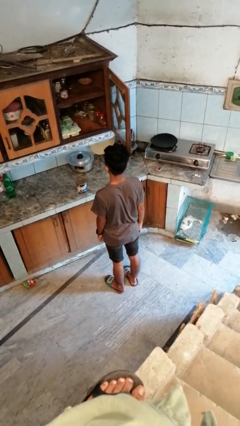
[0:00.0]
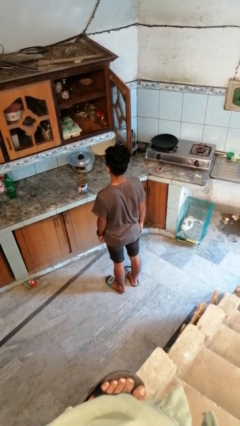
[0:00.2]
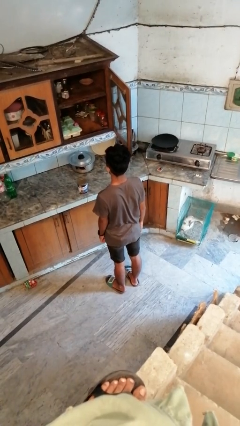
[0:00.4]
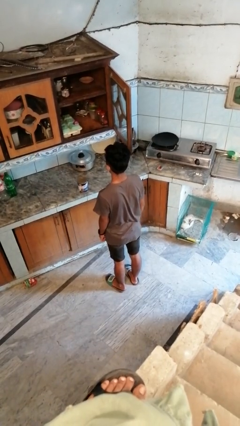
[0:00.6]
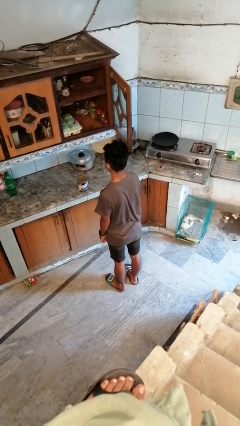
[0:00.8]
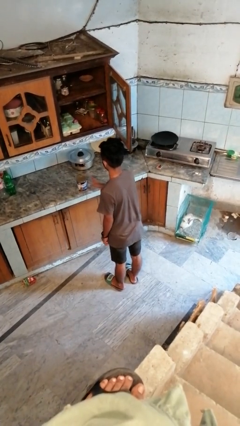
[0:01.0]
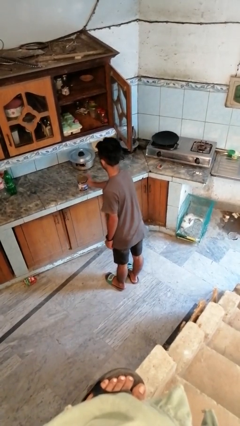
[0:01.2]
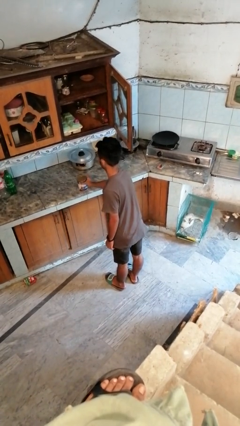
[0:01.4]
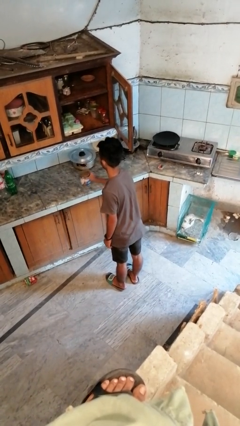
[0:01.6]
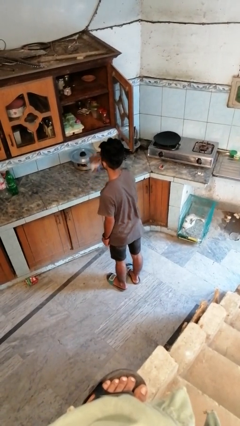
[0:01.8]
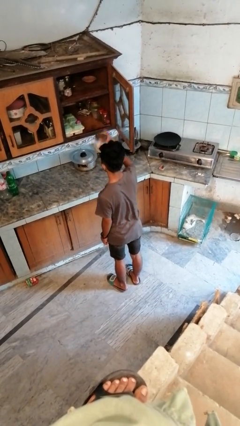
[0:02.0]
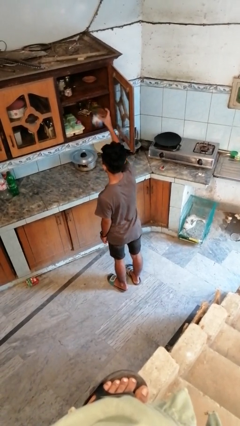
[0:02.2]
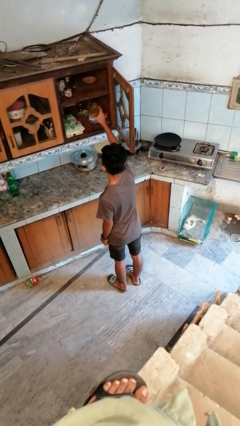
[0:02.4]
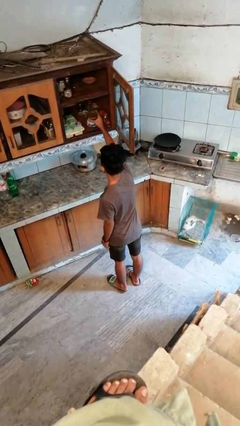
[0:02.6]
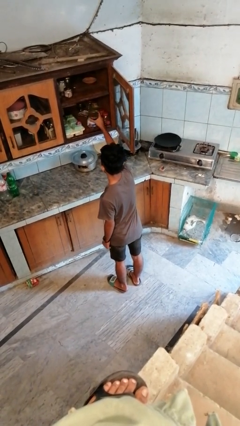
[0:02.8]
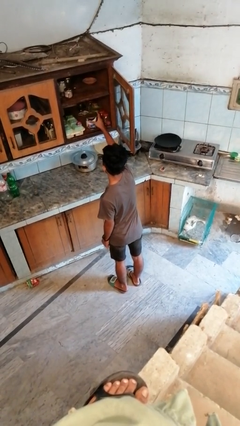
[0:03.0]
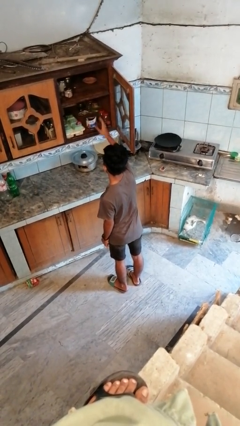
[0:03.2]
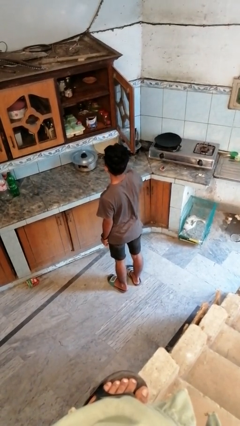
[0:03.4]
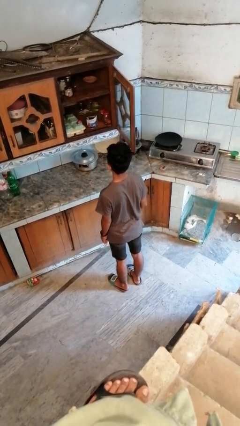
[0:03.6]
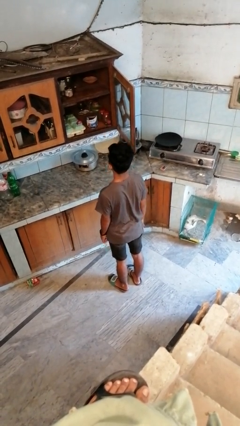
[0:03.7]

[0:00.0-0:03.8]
person puts object in cabinet

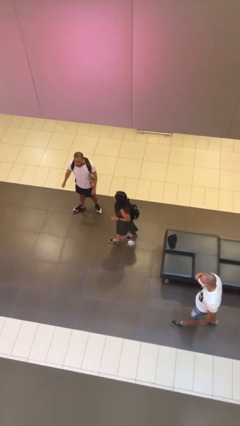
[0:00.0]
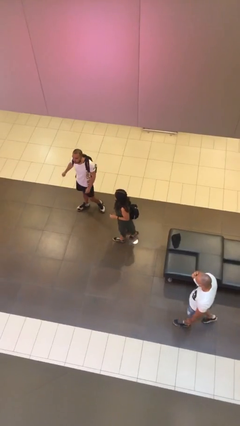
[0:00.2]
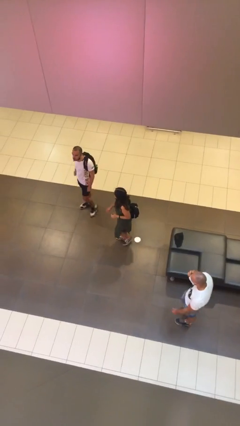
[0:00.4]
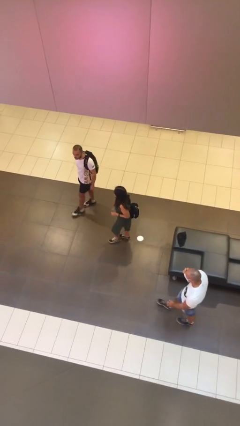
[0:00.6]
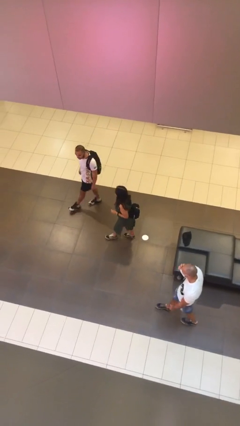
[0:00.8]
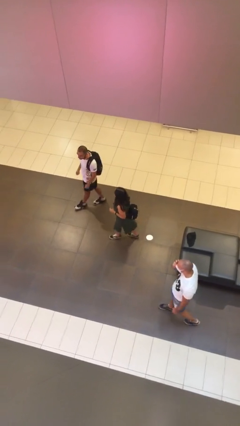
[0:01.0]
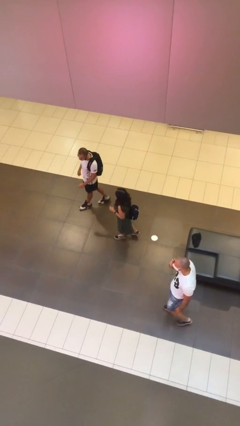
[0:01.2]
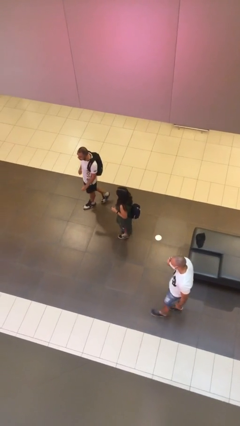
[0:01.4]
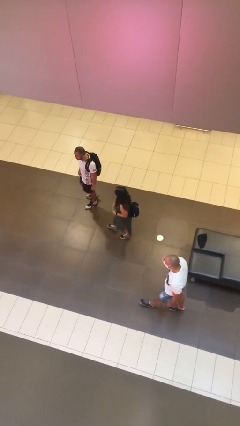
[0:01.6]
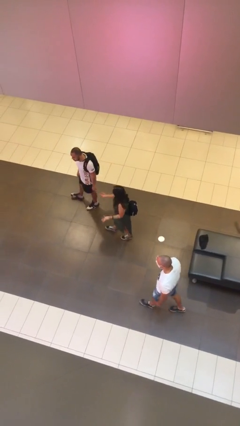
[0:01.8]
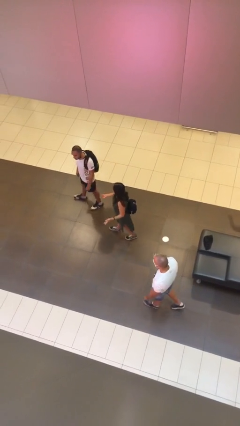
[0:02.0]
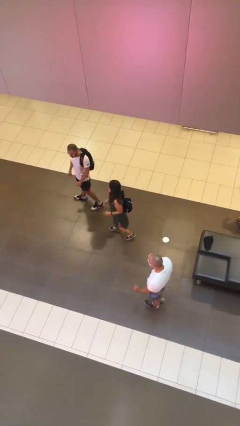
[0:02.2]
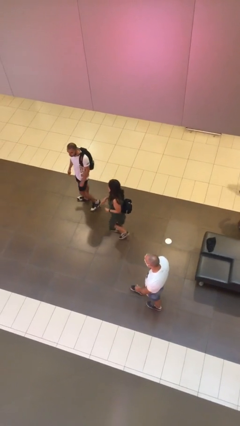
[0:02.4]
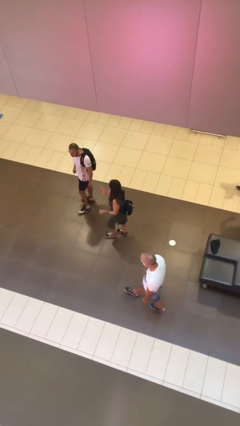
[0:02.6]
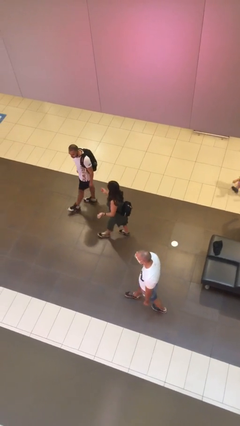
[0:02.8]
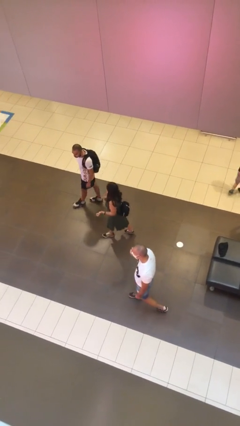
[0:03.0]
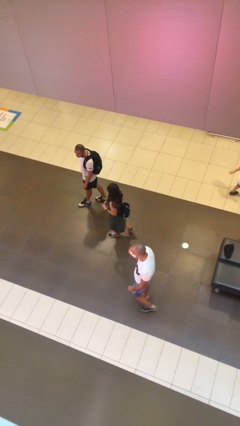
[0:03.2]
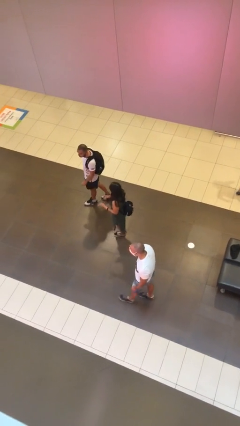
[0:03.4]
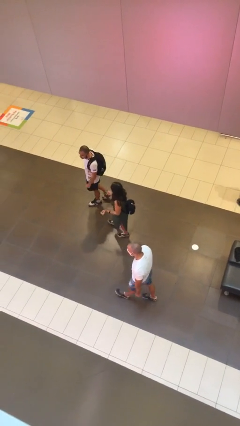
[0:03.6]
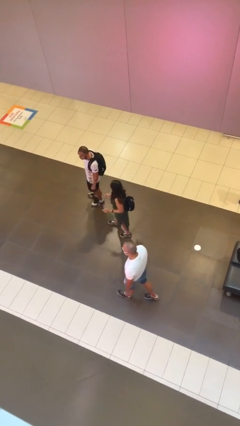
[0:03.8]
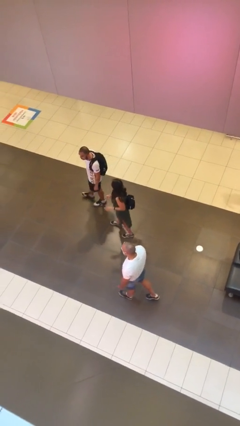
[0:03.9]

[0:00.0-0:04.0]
person talks to person

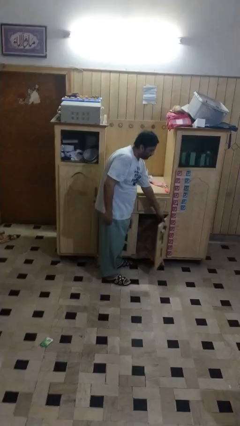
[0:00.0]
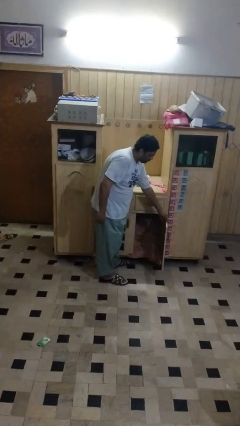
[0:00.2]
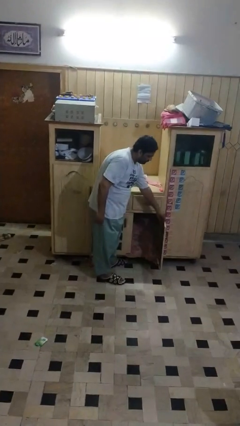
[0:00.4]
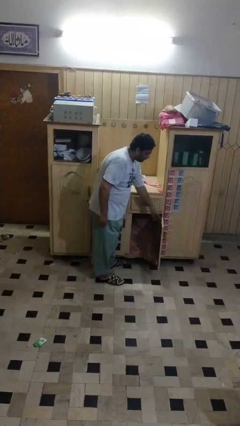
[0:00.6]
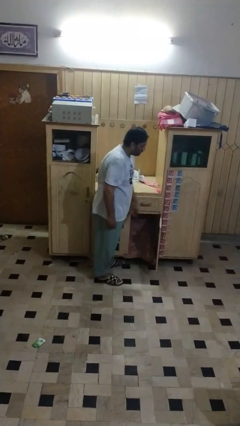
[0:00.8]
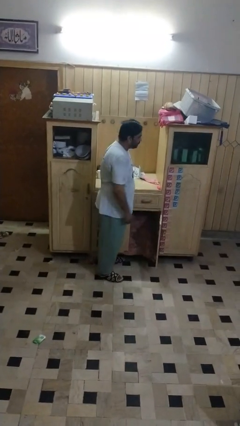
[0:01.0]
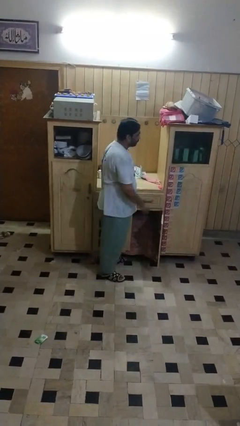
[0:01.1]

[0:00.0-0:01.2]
person closes cabinet

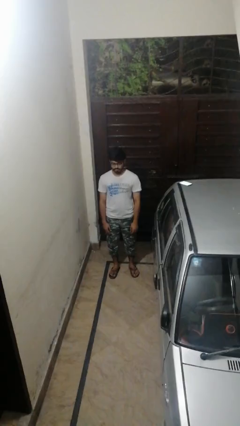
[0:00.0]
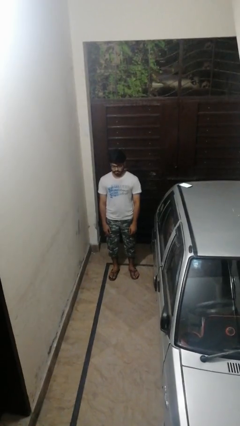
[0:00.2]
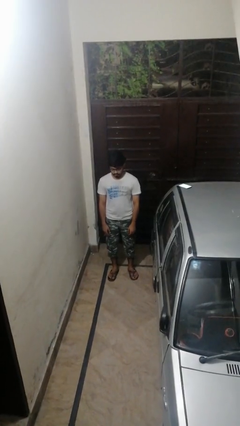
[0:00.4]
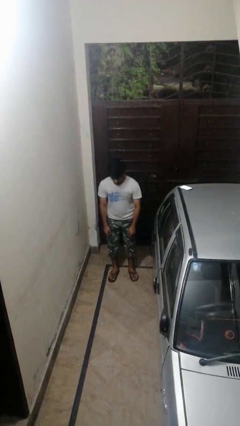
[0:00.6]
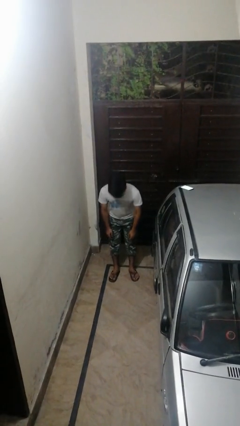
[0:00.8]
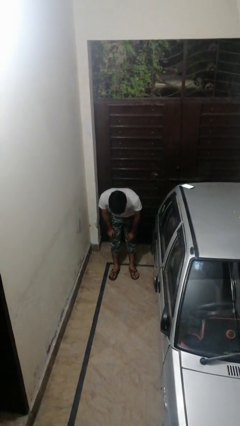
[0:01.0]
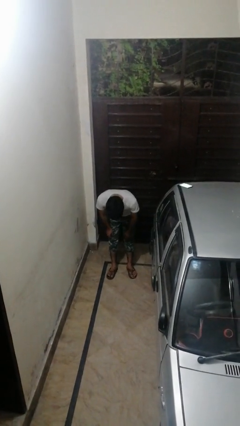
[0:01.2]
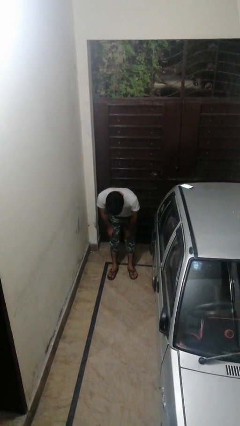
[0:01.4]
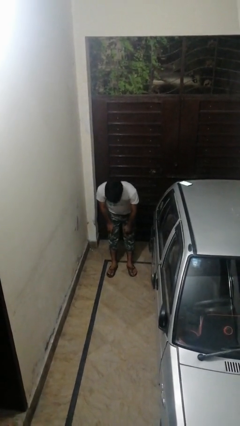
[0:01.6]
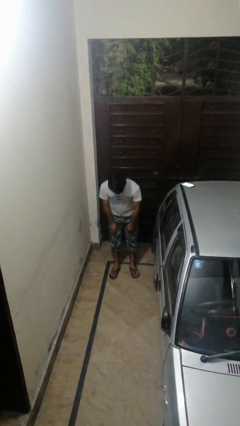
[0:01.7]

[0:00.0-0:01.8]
person bows

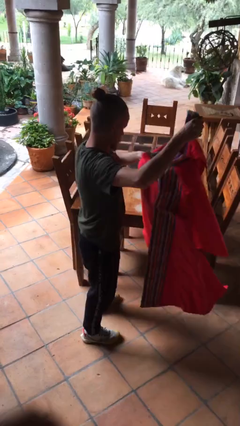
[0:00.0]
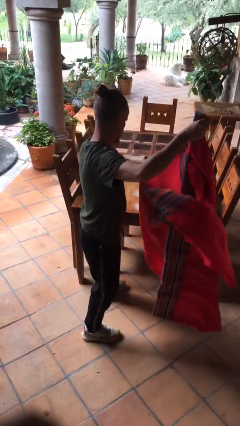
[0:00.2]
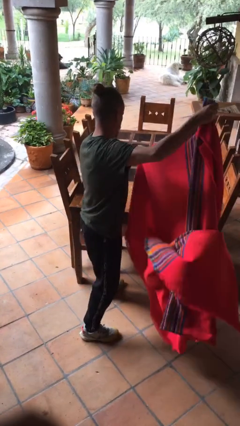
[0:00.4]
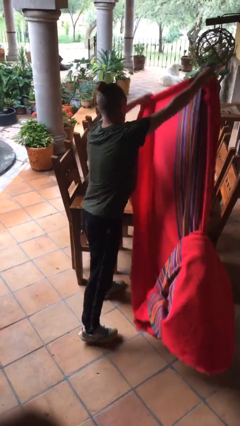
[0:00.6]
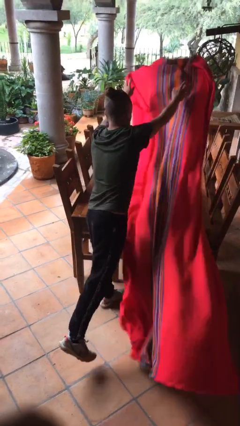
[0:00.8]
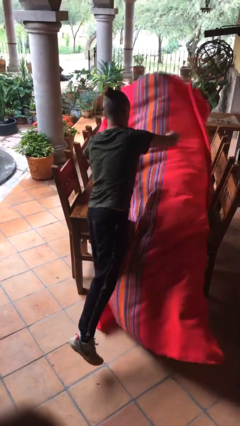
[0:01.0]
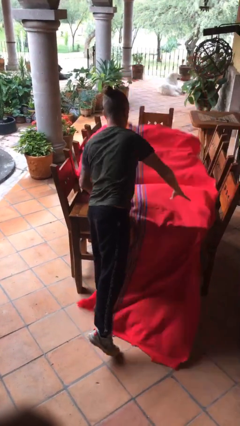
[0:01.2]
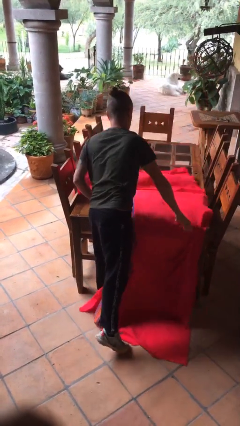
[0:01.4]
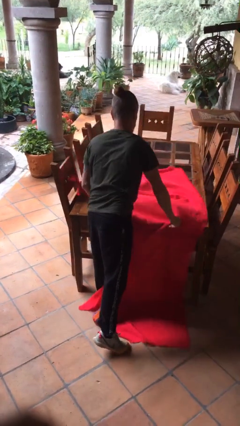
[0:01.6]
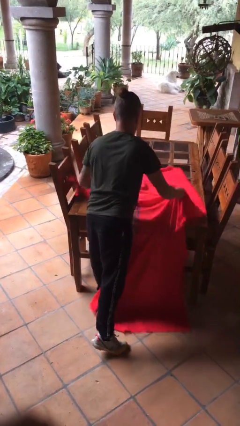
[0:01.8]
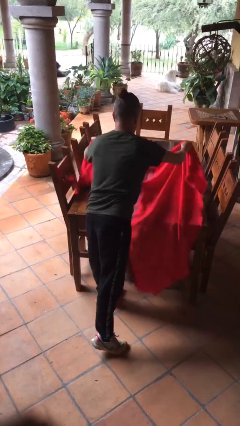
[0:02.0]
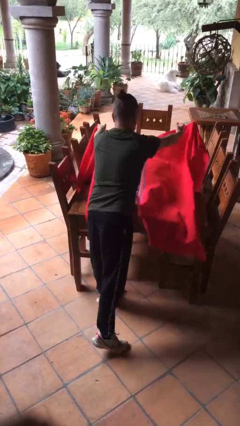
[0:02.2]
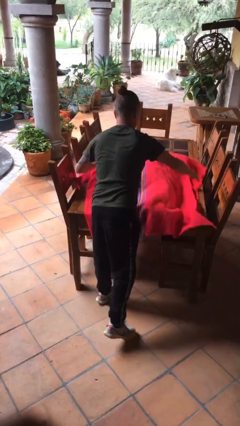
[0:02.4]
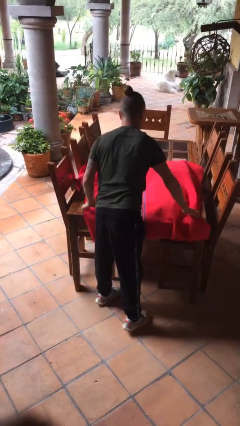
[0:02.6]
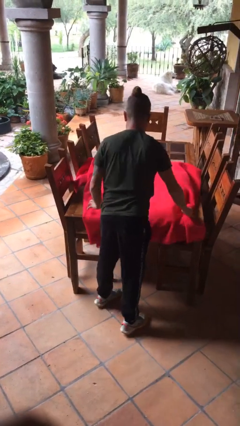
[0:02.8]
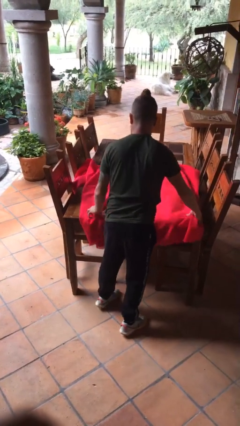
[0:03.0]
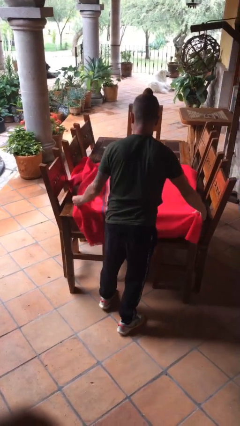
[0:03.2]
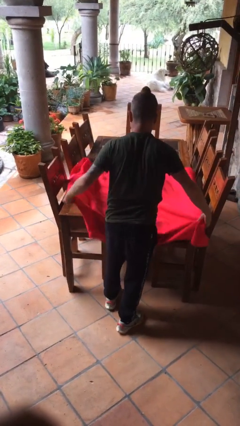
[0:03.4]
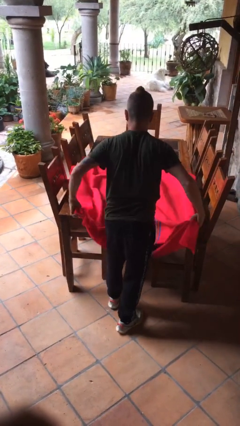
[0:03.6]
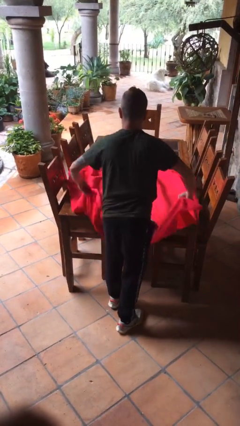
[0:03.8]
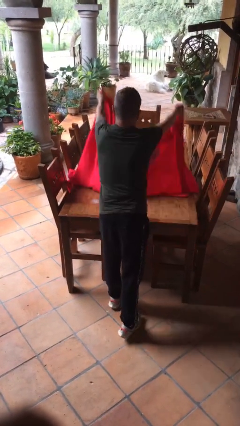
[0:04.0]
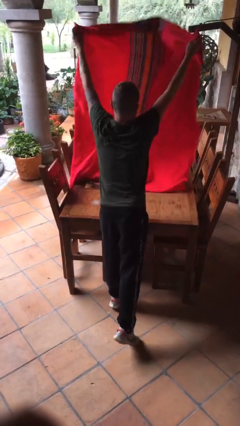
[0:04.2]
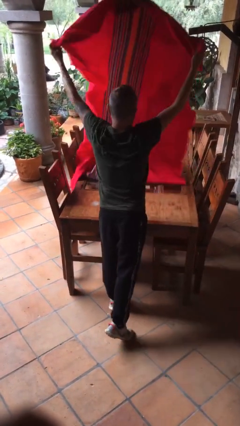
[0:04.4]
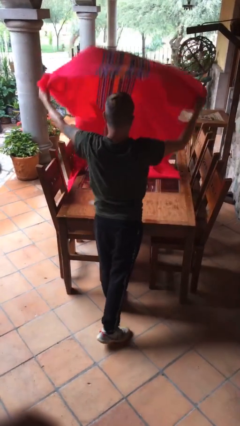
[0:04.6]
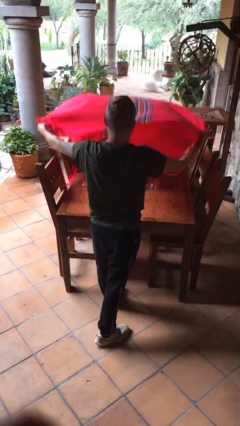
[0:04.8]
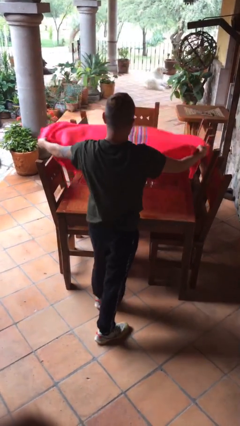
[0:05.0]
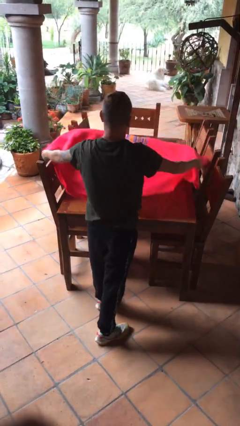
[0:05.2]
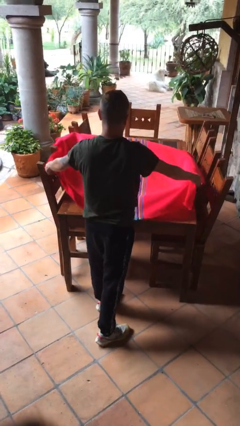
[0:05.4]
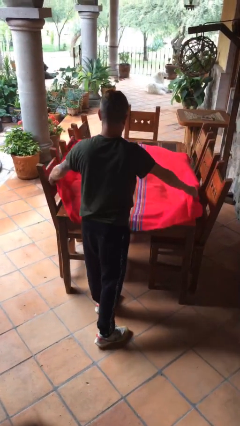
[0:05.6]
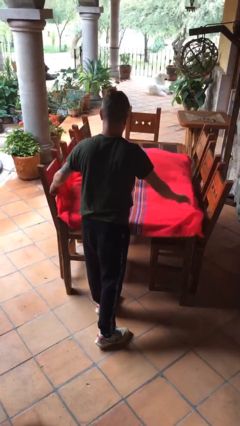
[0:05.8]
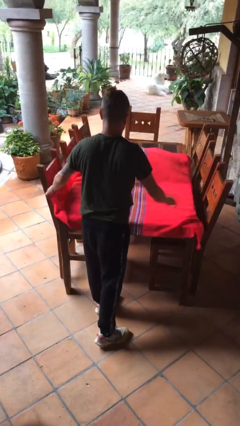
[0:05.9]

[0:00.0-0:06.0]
person spreads tablecloth

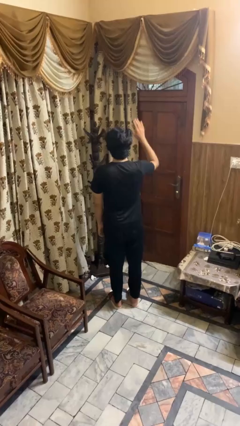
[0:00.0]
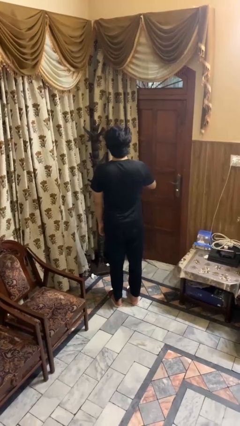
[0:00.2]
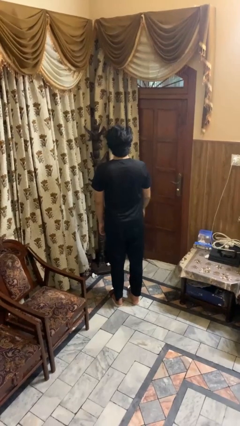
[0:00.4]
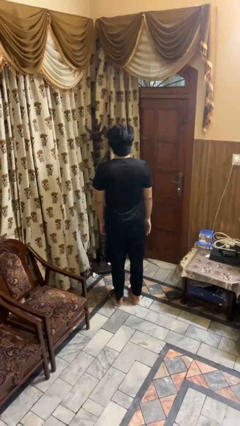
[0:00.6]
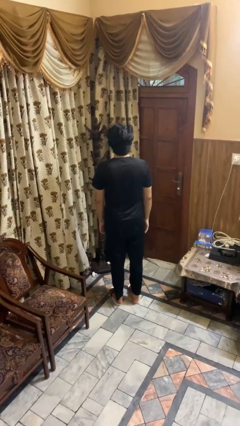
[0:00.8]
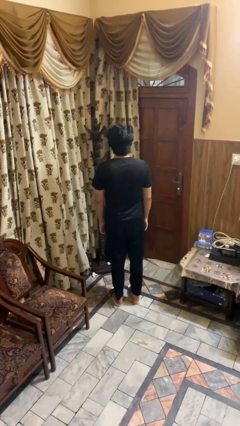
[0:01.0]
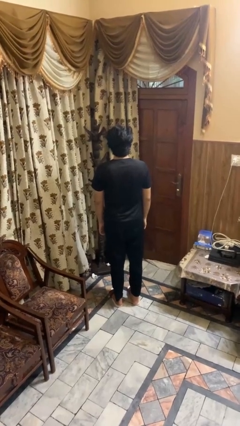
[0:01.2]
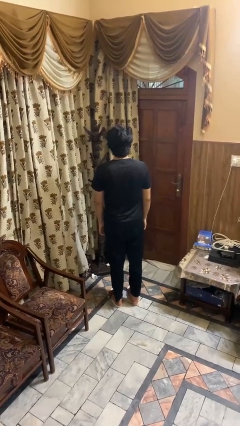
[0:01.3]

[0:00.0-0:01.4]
person gestures lower hand
